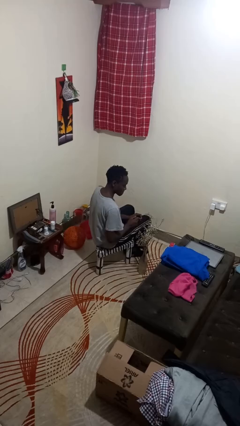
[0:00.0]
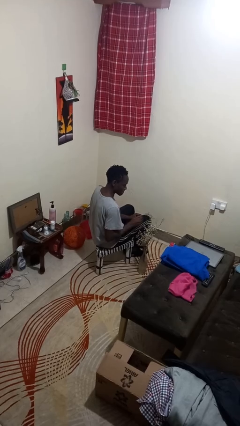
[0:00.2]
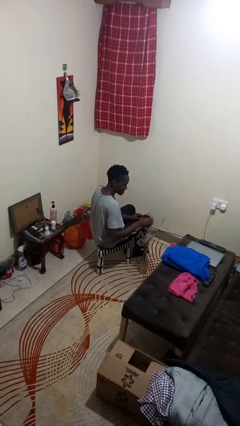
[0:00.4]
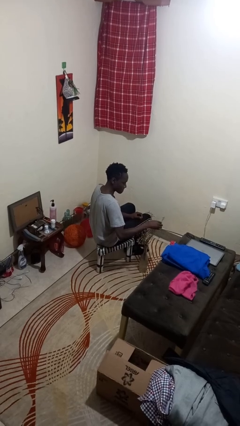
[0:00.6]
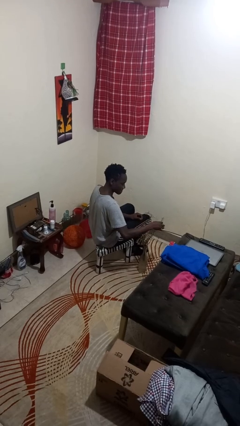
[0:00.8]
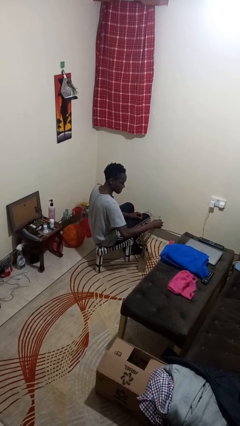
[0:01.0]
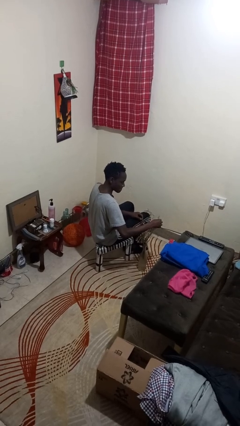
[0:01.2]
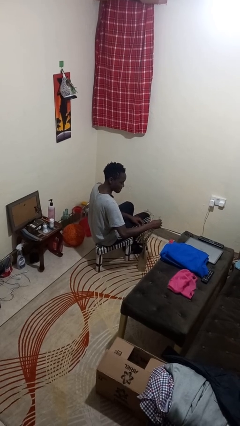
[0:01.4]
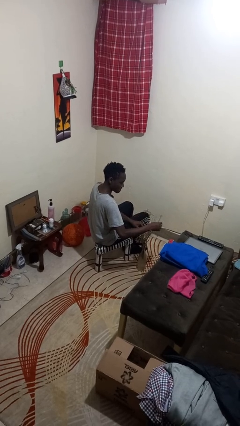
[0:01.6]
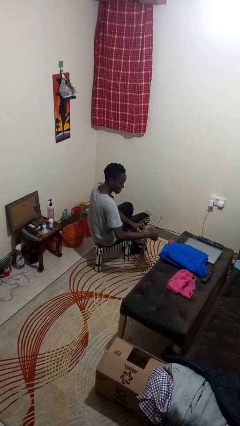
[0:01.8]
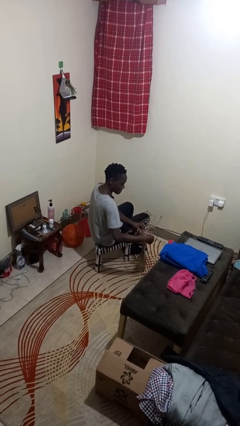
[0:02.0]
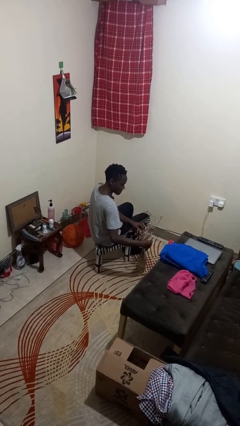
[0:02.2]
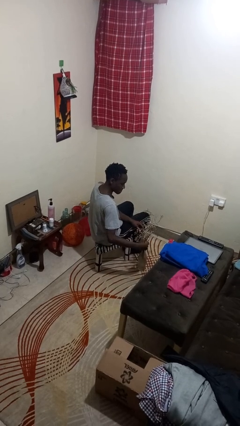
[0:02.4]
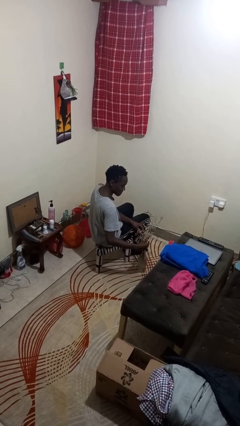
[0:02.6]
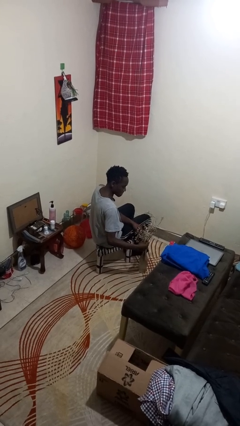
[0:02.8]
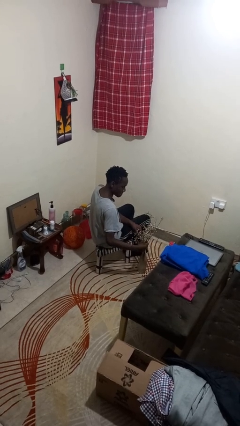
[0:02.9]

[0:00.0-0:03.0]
person arranges flowers in vase

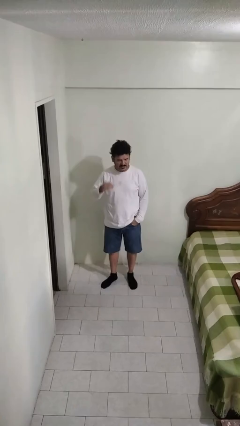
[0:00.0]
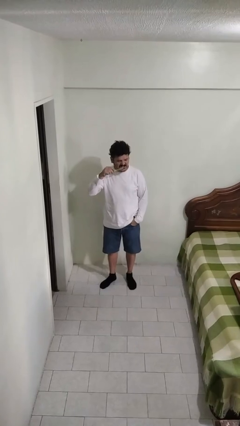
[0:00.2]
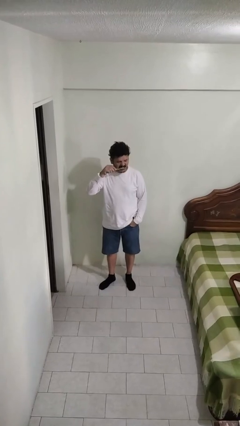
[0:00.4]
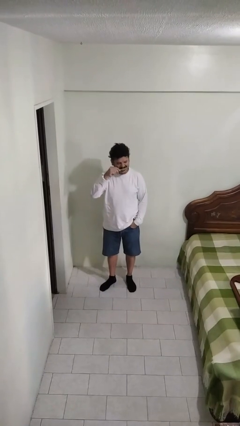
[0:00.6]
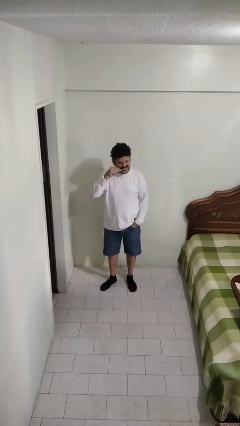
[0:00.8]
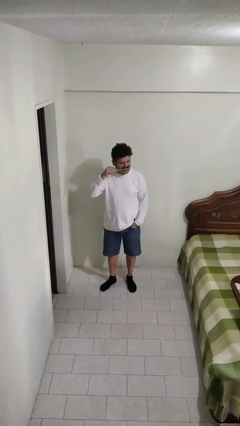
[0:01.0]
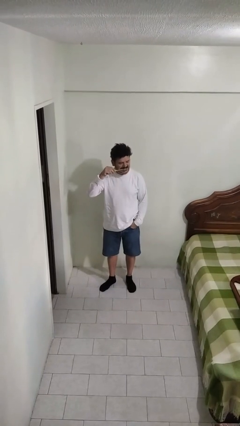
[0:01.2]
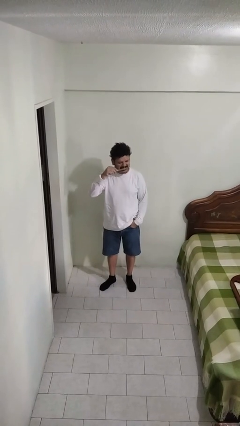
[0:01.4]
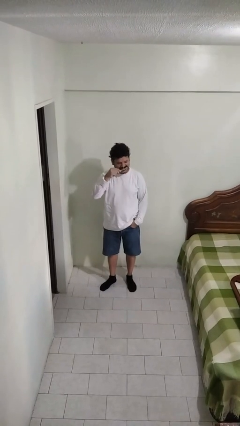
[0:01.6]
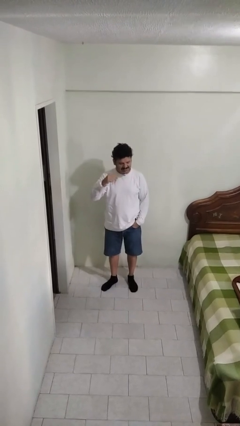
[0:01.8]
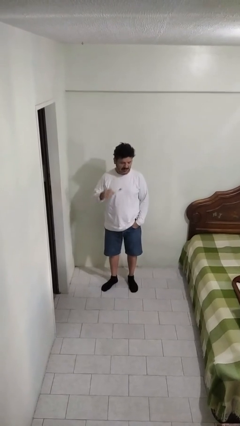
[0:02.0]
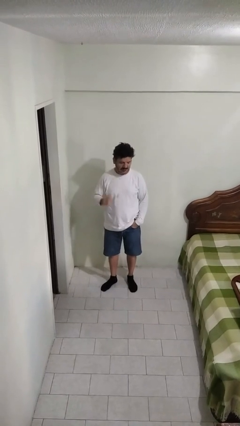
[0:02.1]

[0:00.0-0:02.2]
person brushes teeth

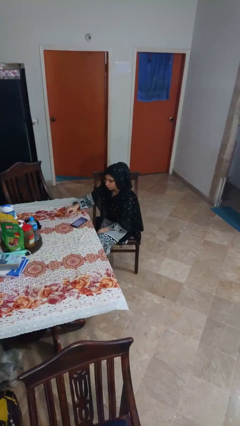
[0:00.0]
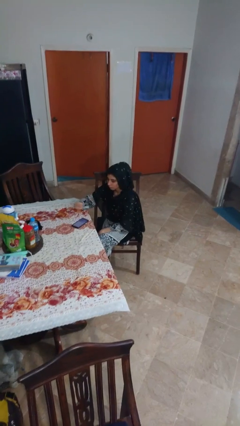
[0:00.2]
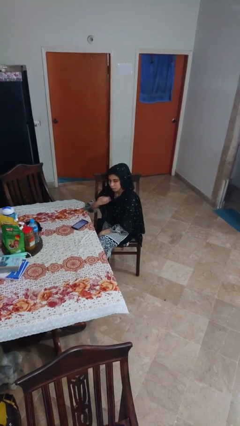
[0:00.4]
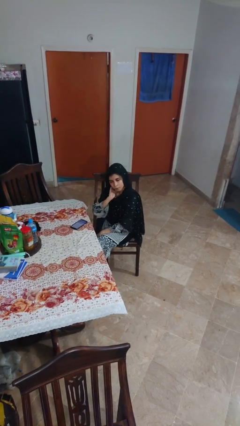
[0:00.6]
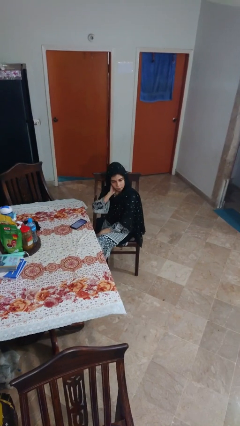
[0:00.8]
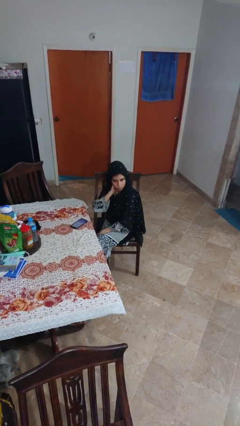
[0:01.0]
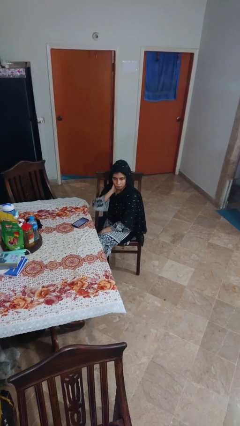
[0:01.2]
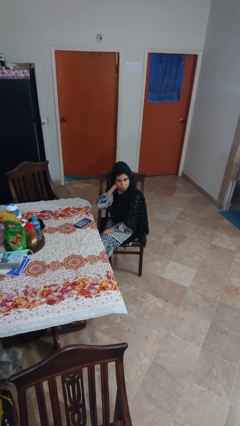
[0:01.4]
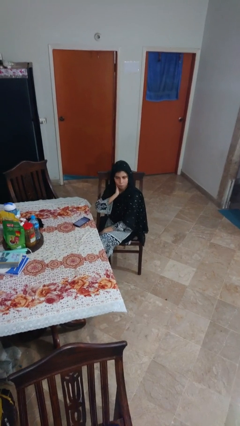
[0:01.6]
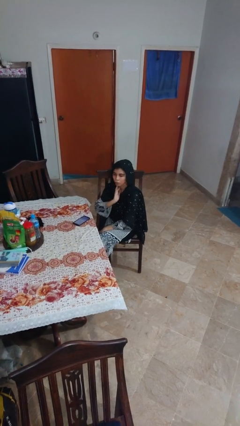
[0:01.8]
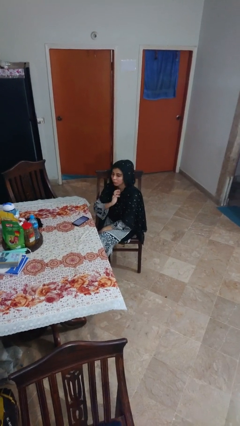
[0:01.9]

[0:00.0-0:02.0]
person rubs neck

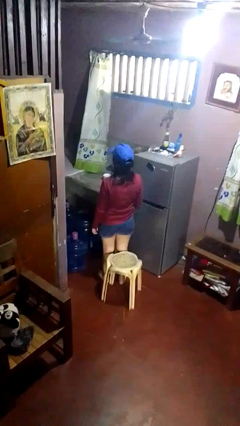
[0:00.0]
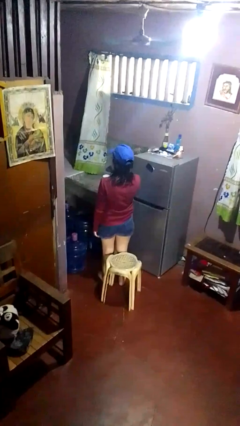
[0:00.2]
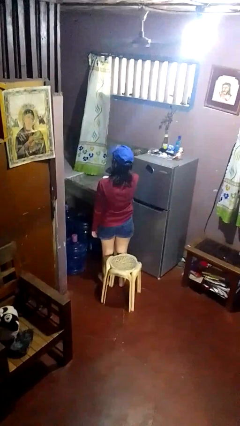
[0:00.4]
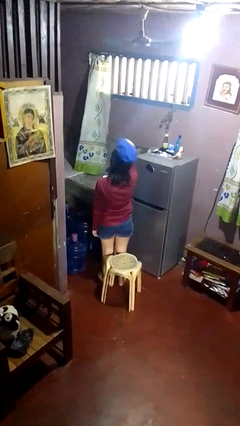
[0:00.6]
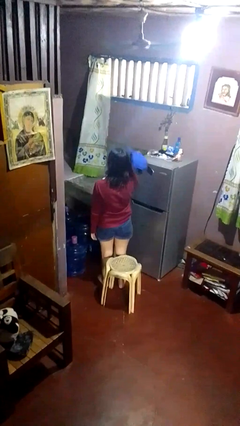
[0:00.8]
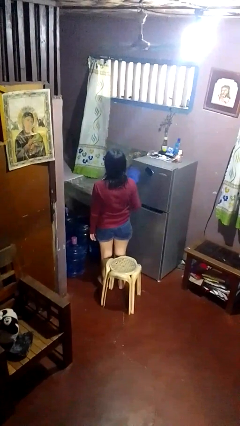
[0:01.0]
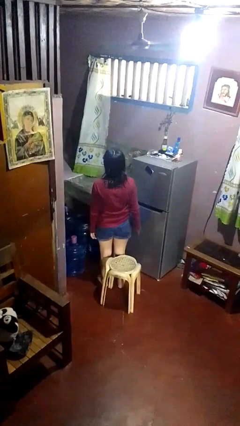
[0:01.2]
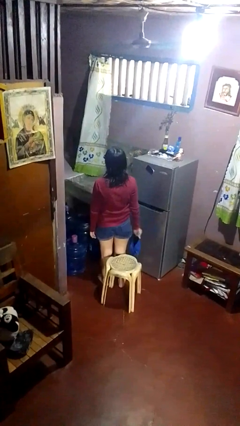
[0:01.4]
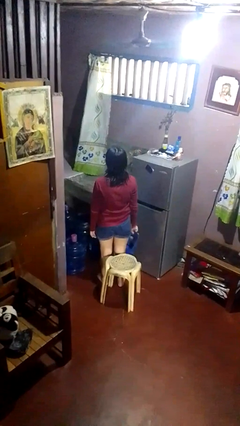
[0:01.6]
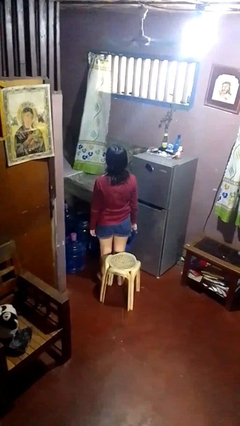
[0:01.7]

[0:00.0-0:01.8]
person takes off hat

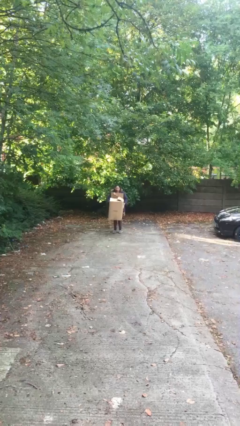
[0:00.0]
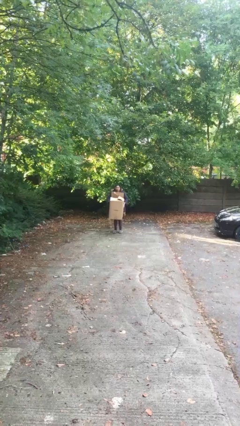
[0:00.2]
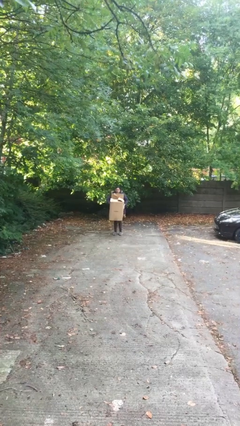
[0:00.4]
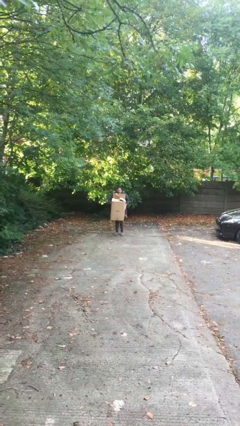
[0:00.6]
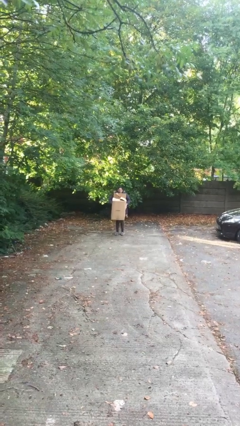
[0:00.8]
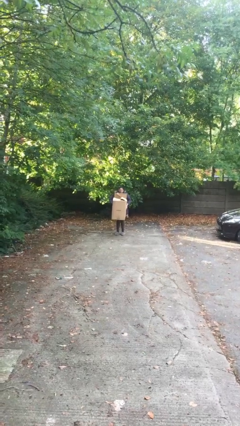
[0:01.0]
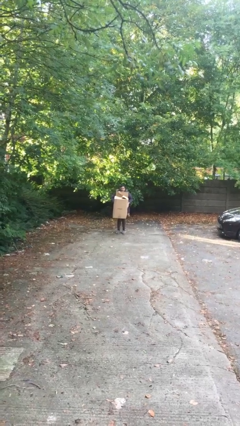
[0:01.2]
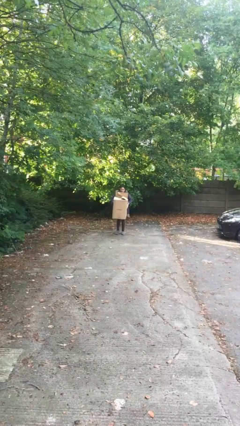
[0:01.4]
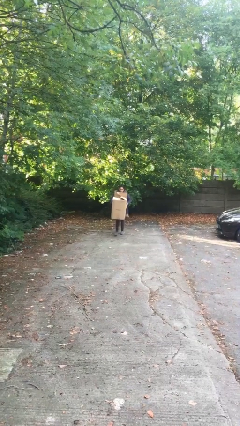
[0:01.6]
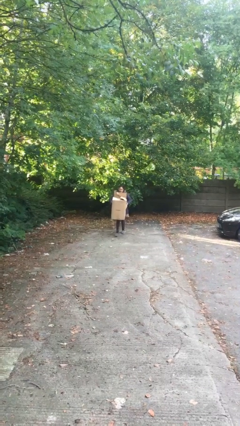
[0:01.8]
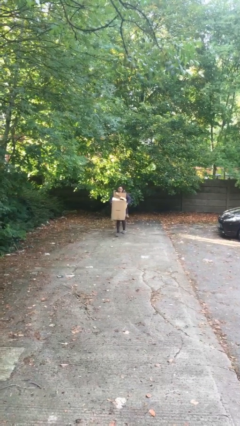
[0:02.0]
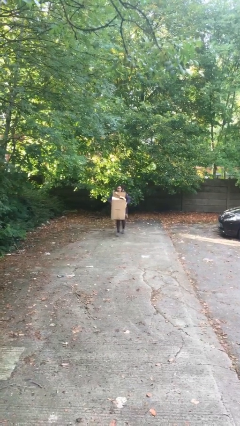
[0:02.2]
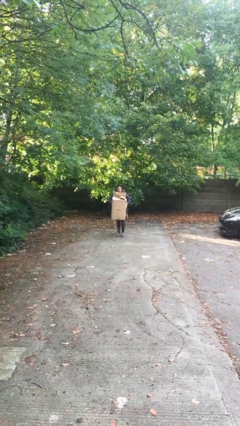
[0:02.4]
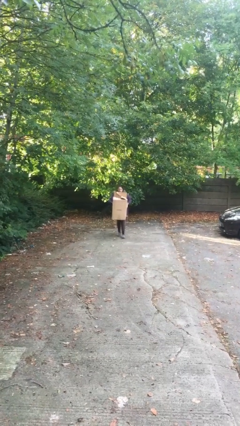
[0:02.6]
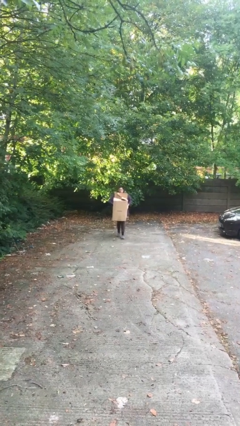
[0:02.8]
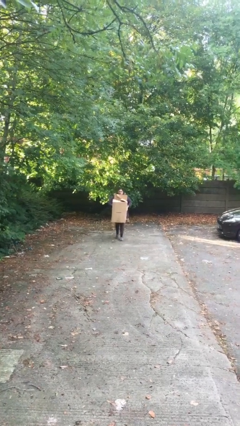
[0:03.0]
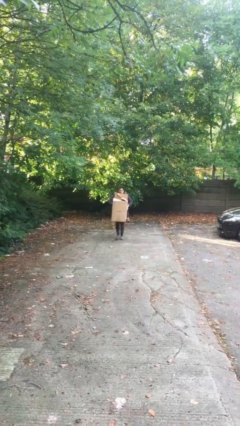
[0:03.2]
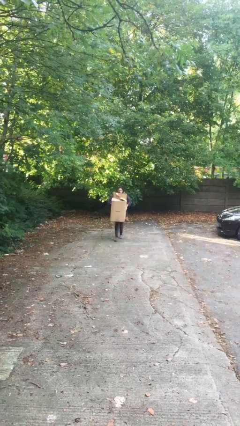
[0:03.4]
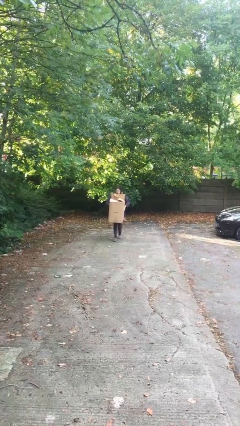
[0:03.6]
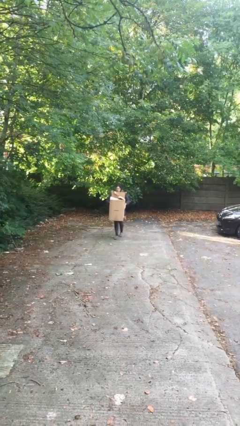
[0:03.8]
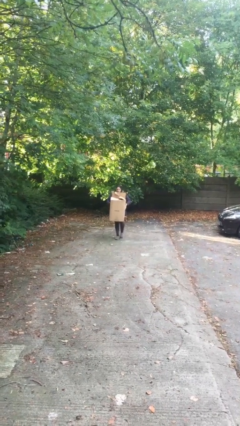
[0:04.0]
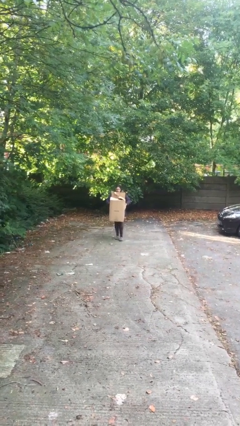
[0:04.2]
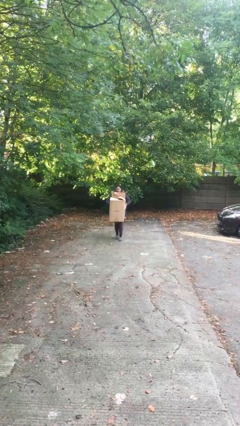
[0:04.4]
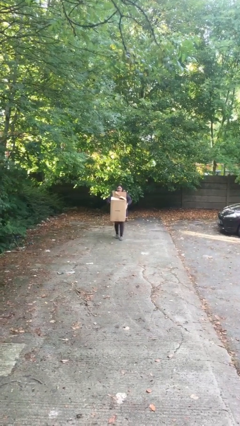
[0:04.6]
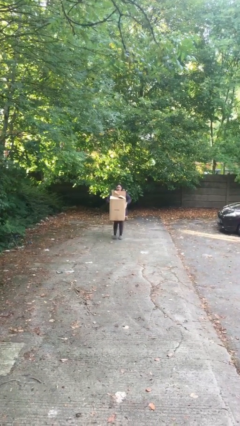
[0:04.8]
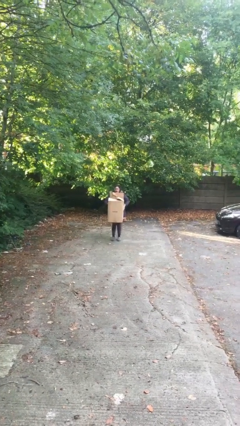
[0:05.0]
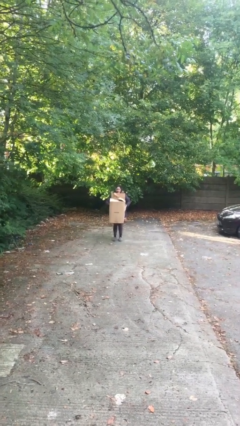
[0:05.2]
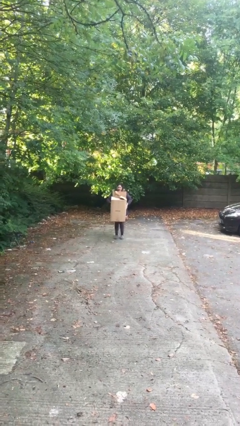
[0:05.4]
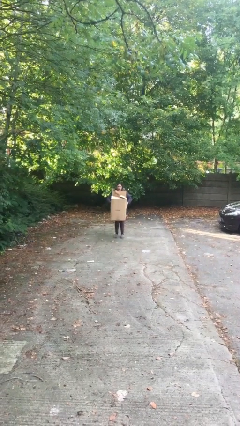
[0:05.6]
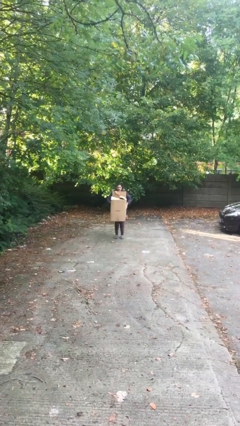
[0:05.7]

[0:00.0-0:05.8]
person carries heavy object

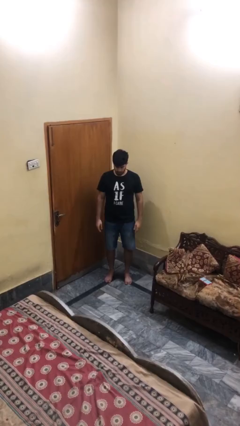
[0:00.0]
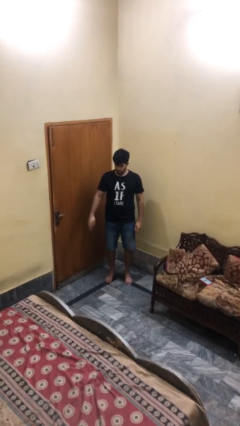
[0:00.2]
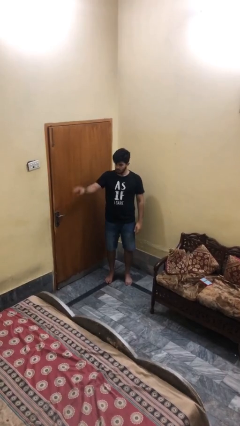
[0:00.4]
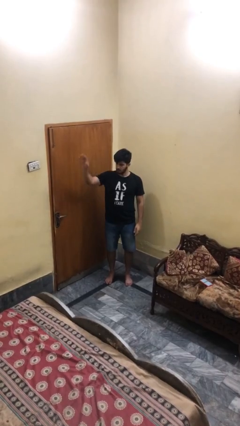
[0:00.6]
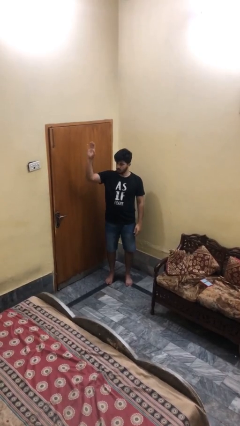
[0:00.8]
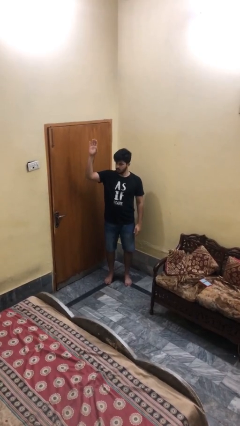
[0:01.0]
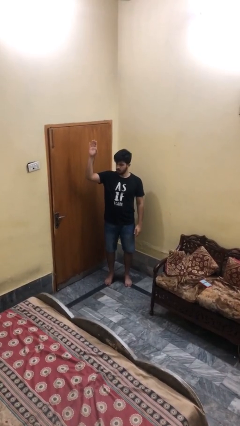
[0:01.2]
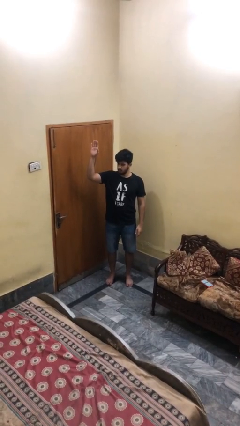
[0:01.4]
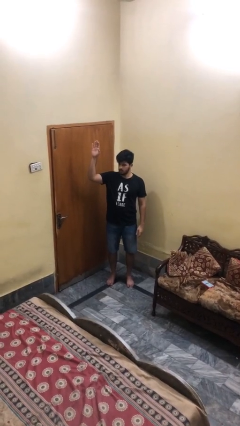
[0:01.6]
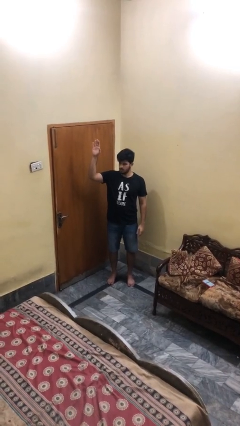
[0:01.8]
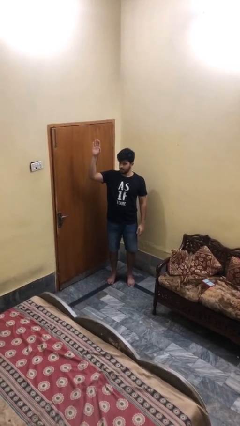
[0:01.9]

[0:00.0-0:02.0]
person gestures raise hand

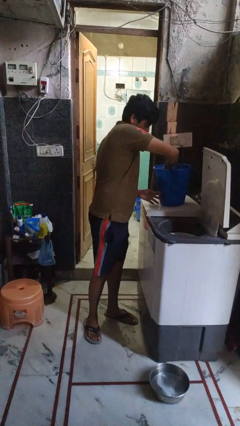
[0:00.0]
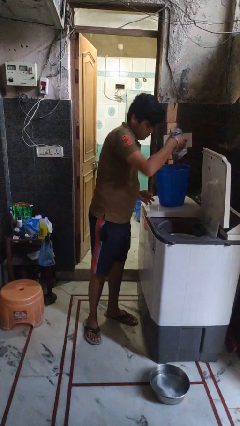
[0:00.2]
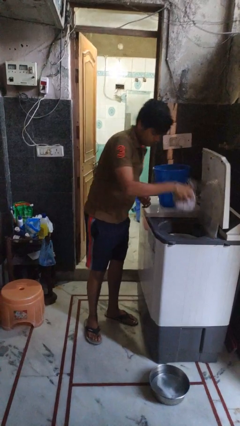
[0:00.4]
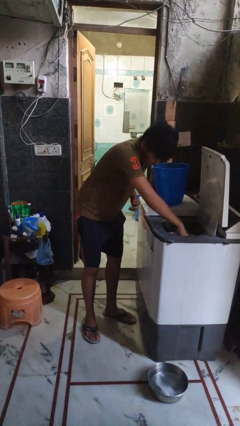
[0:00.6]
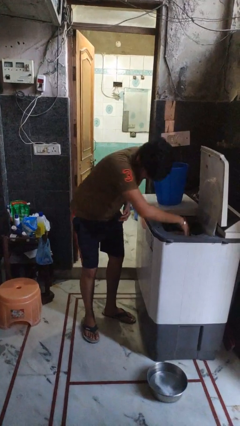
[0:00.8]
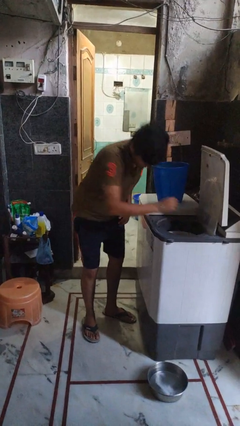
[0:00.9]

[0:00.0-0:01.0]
person loads dryer
